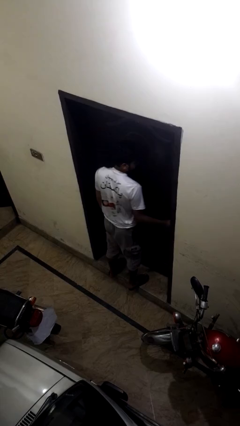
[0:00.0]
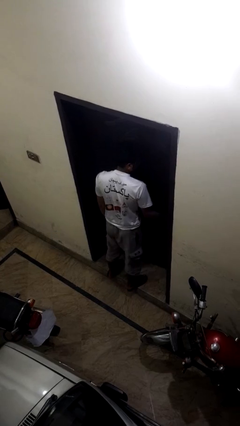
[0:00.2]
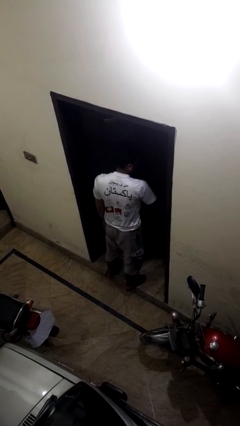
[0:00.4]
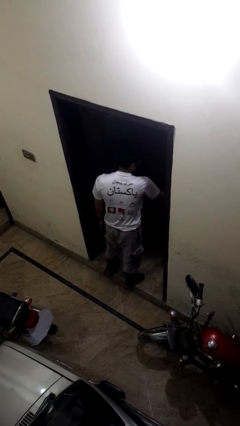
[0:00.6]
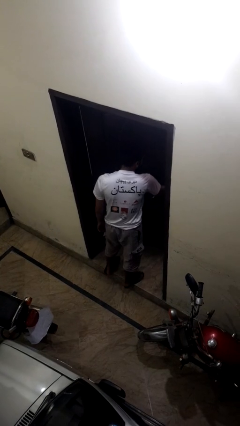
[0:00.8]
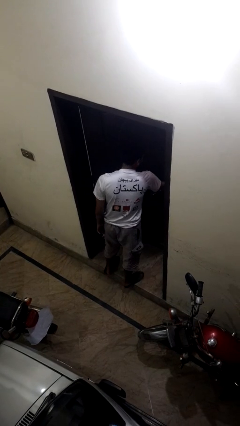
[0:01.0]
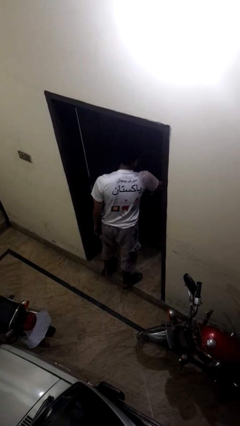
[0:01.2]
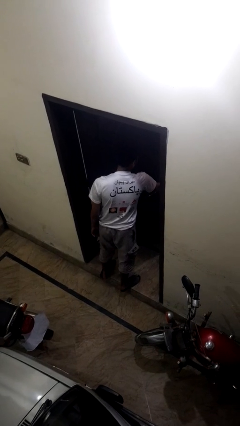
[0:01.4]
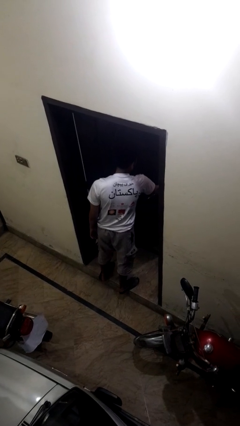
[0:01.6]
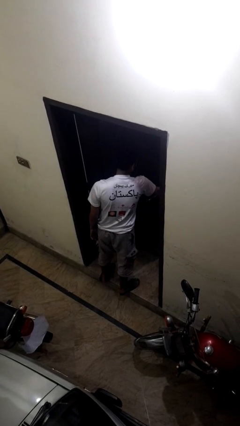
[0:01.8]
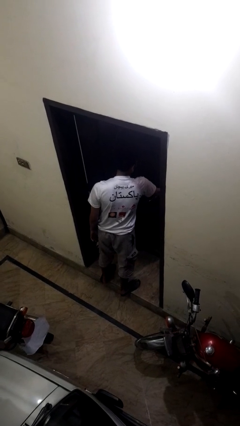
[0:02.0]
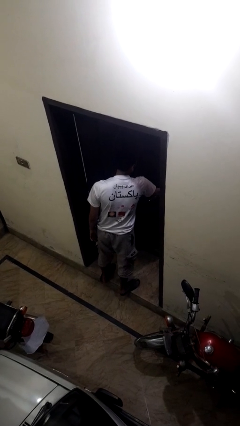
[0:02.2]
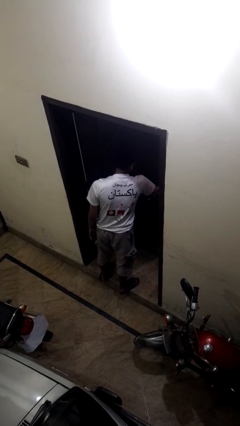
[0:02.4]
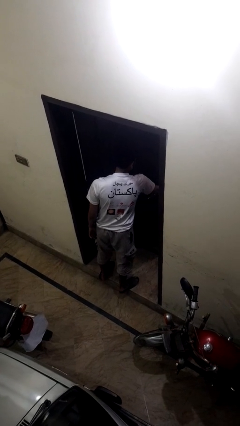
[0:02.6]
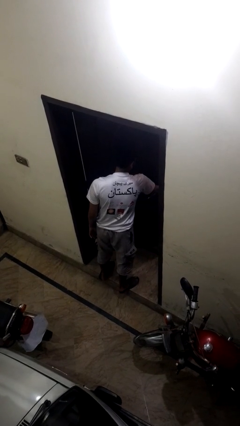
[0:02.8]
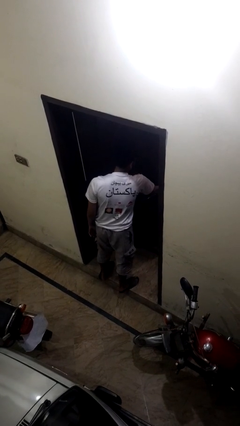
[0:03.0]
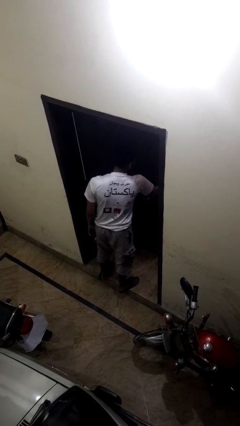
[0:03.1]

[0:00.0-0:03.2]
person opens facility door

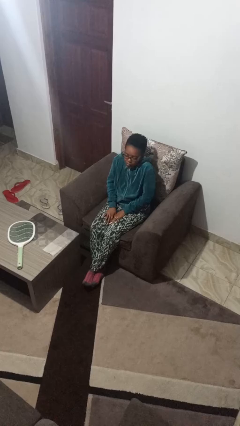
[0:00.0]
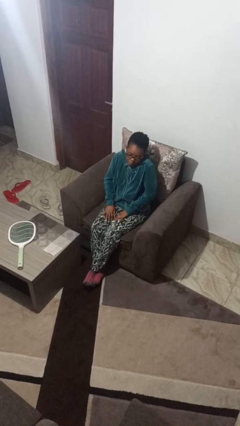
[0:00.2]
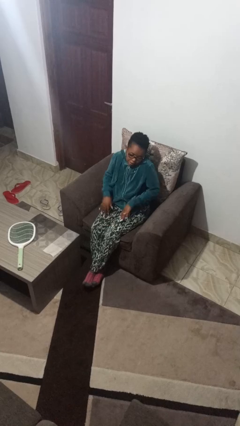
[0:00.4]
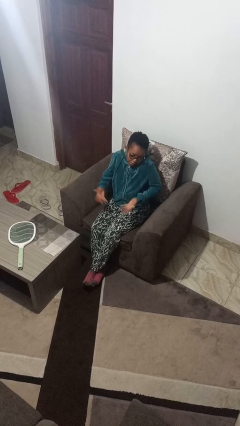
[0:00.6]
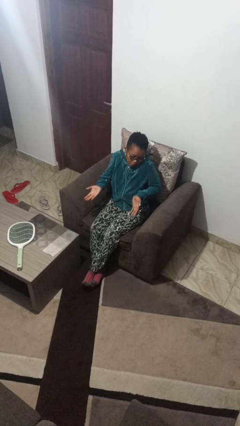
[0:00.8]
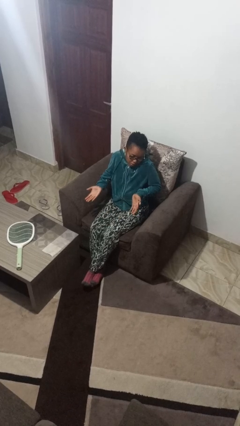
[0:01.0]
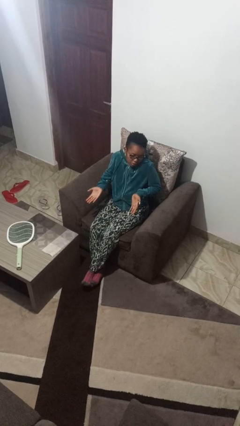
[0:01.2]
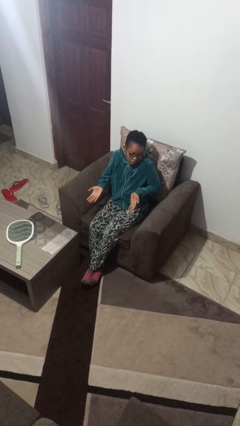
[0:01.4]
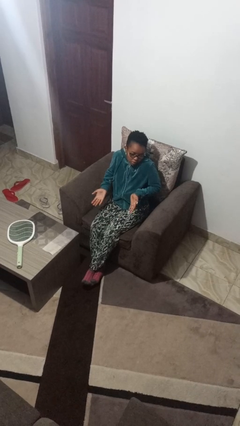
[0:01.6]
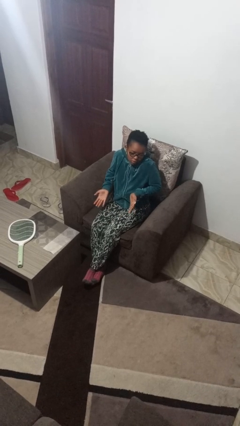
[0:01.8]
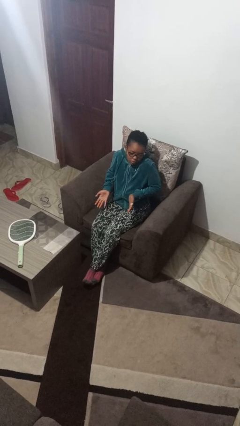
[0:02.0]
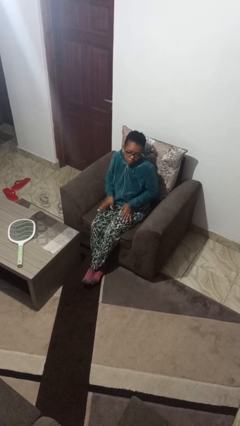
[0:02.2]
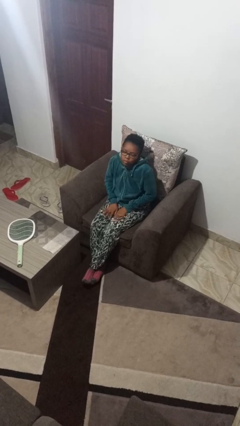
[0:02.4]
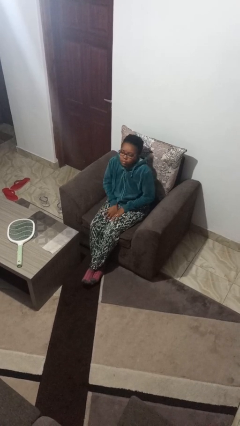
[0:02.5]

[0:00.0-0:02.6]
person shrugs

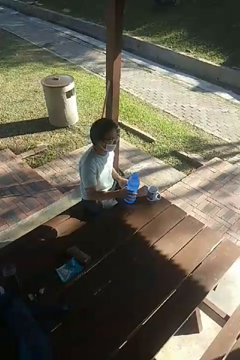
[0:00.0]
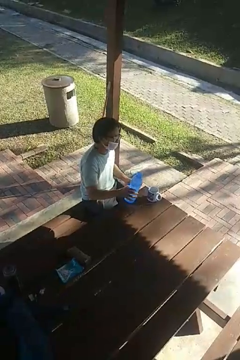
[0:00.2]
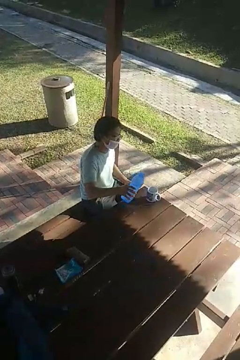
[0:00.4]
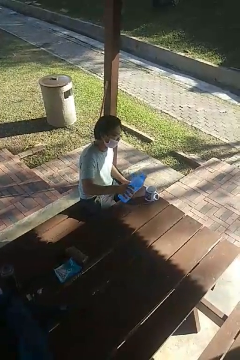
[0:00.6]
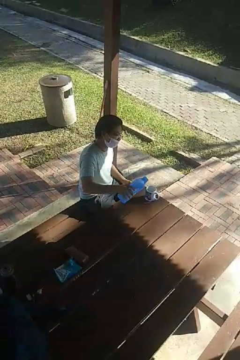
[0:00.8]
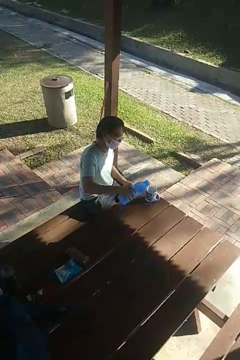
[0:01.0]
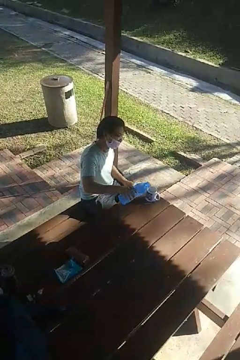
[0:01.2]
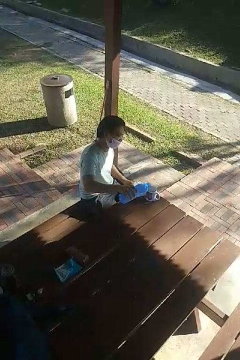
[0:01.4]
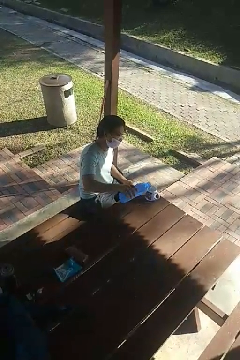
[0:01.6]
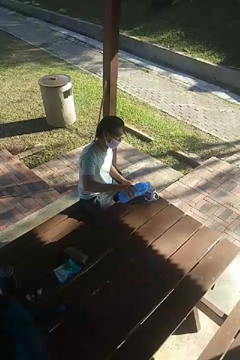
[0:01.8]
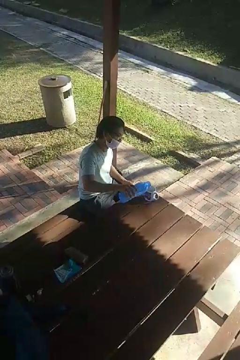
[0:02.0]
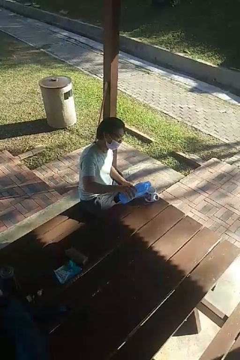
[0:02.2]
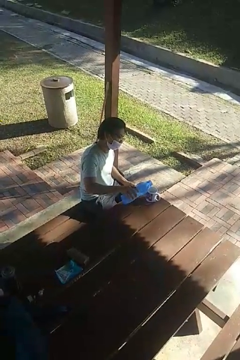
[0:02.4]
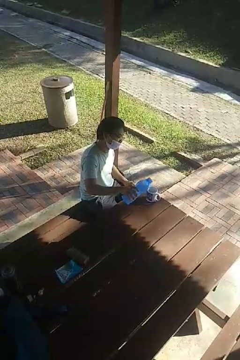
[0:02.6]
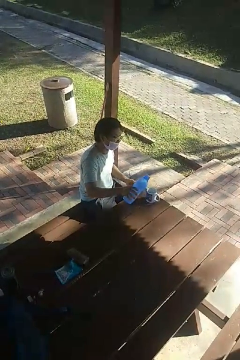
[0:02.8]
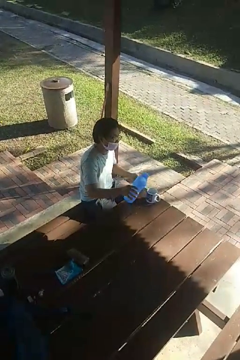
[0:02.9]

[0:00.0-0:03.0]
person pours liquid into cup

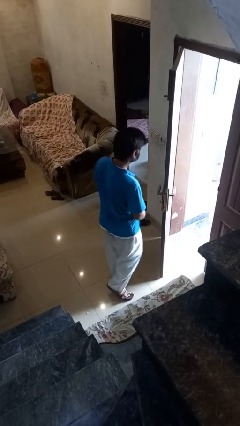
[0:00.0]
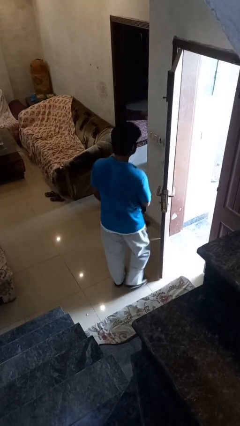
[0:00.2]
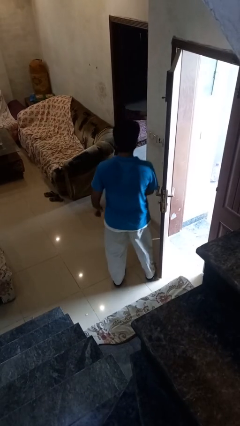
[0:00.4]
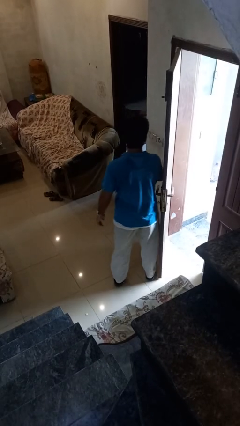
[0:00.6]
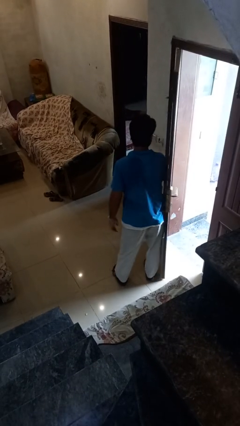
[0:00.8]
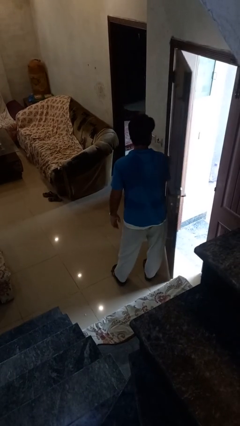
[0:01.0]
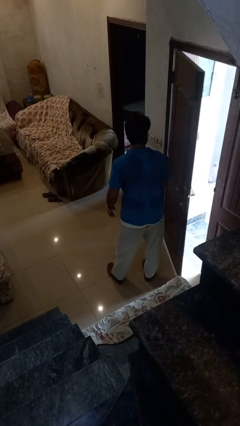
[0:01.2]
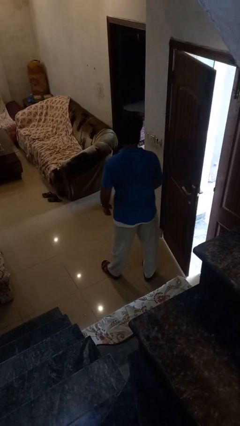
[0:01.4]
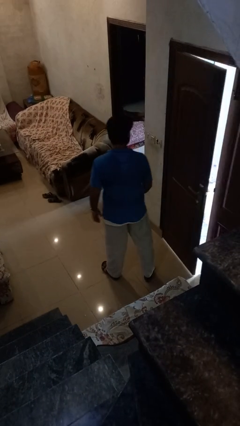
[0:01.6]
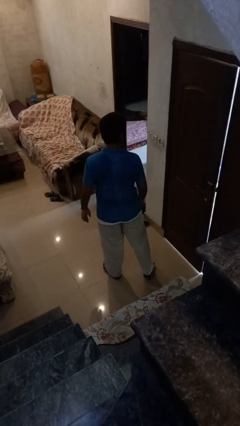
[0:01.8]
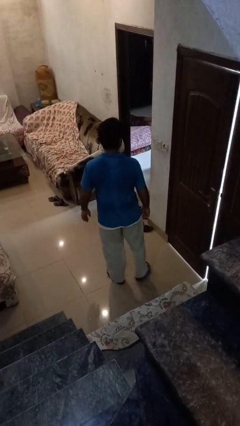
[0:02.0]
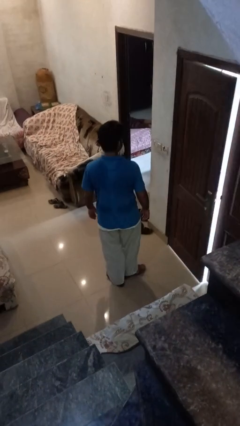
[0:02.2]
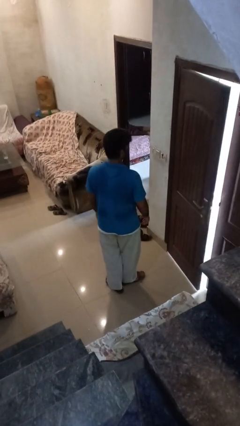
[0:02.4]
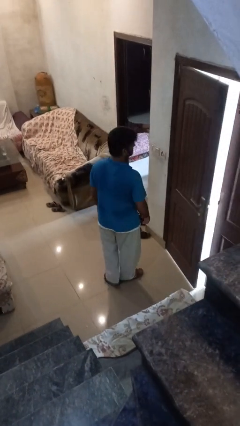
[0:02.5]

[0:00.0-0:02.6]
person closes door with hip

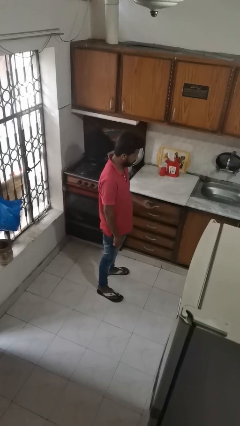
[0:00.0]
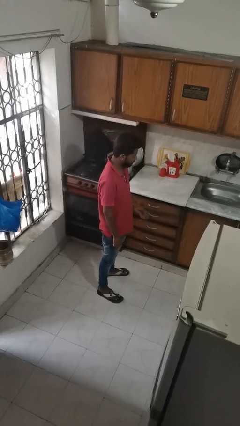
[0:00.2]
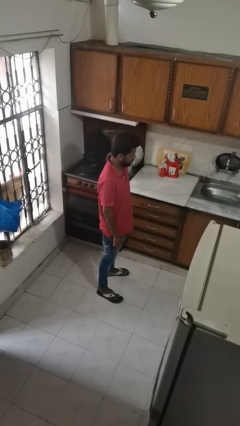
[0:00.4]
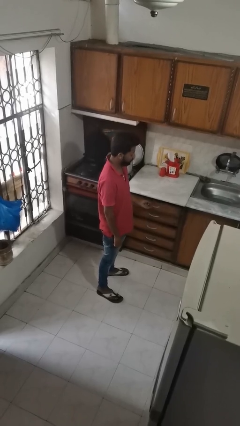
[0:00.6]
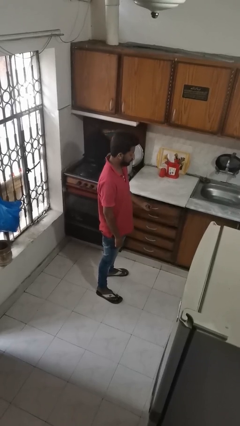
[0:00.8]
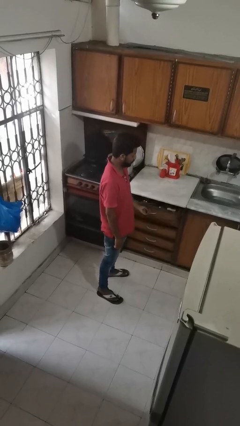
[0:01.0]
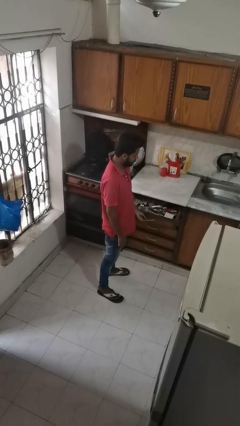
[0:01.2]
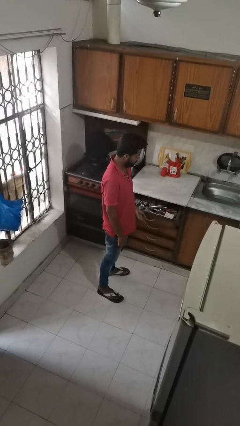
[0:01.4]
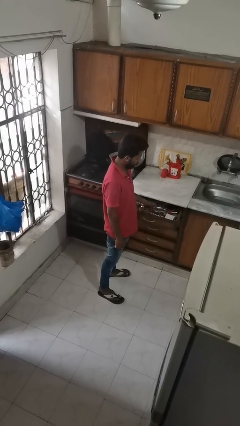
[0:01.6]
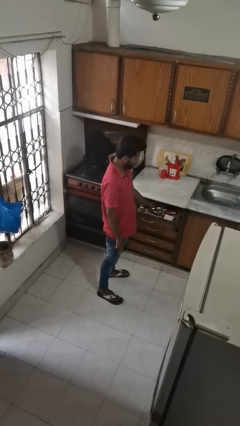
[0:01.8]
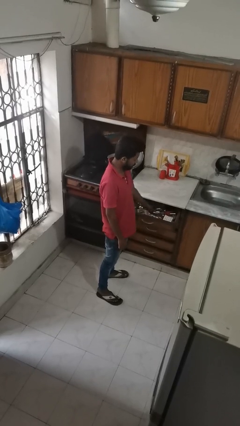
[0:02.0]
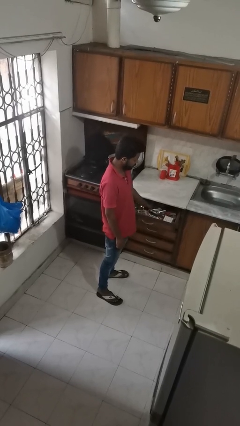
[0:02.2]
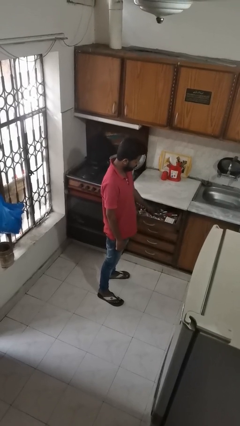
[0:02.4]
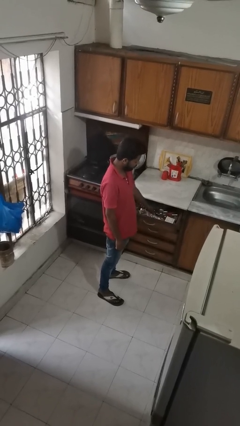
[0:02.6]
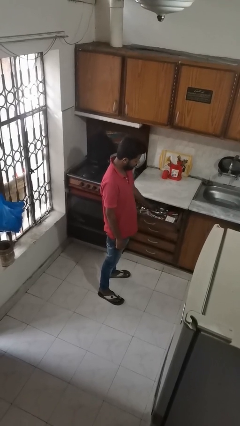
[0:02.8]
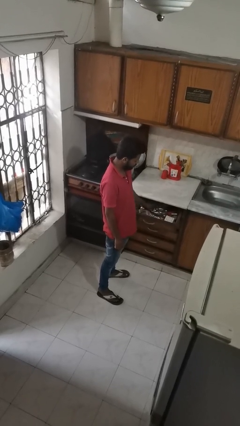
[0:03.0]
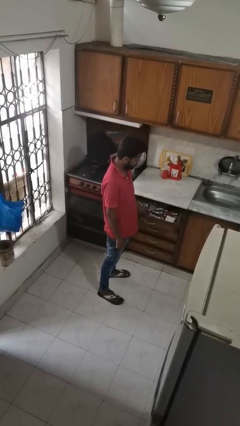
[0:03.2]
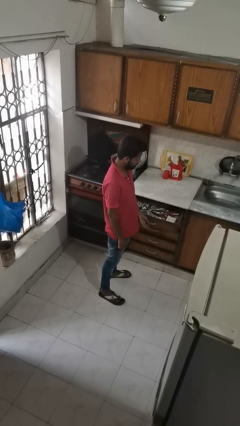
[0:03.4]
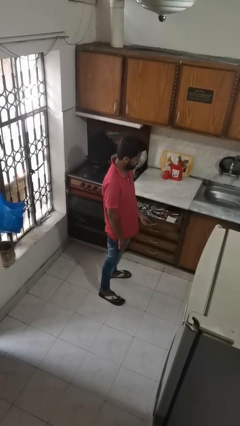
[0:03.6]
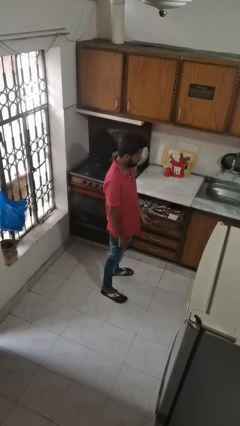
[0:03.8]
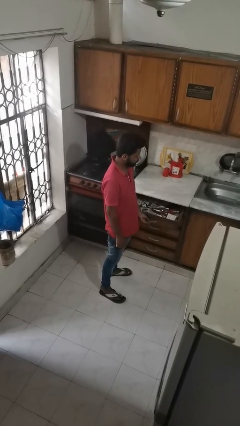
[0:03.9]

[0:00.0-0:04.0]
person searches in kitchen drawer

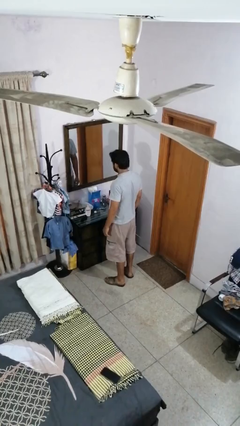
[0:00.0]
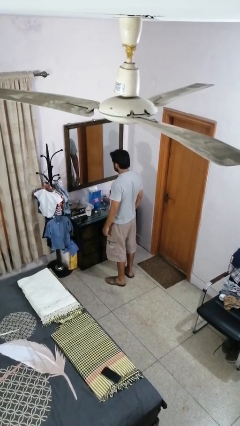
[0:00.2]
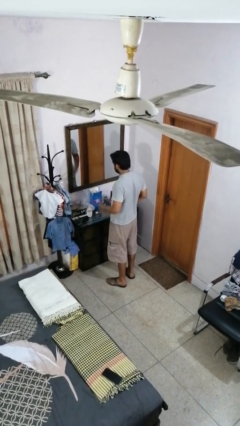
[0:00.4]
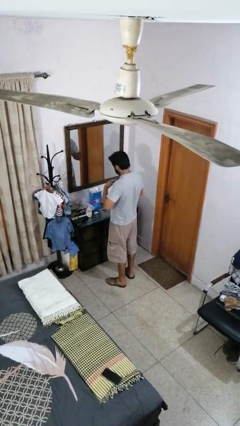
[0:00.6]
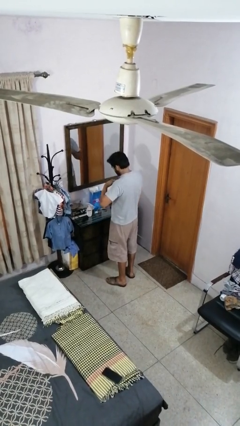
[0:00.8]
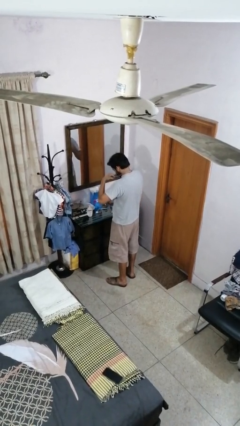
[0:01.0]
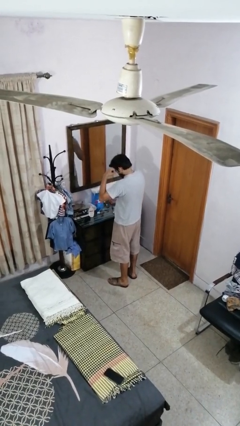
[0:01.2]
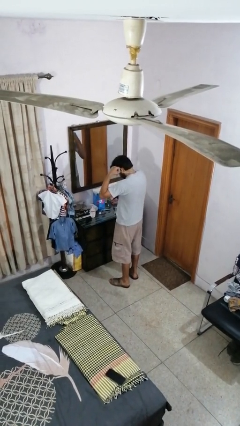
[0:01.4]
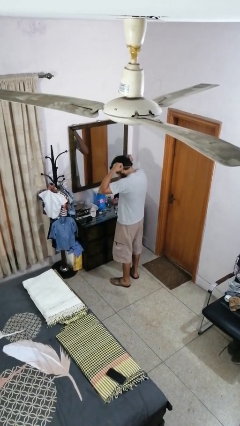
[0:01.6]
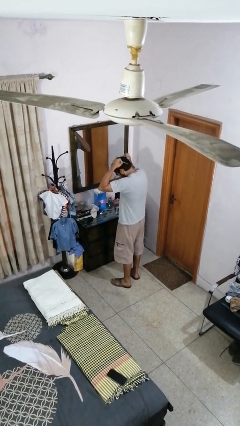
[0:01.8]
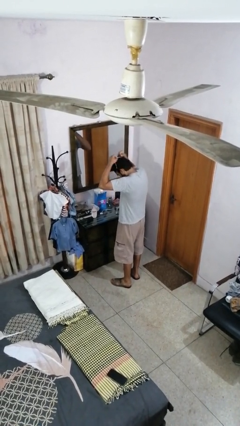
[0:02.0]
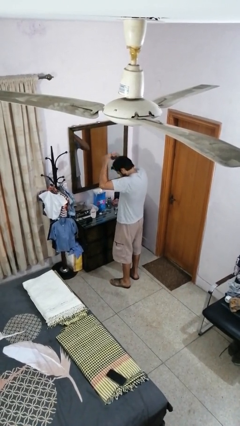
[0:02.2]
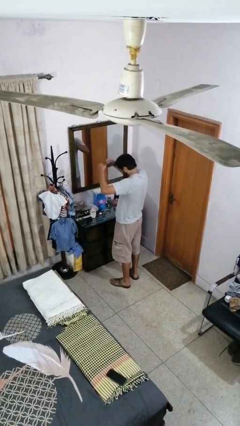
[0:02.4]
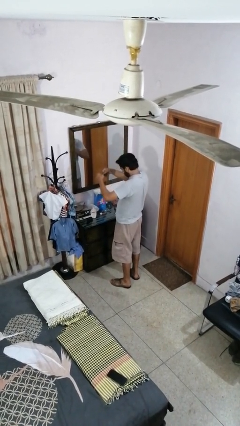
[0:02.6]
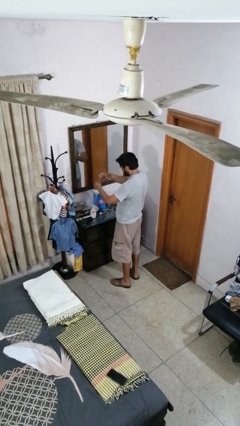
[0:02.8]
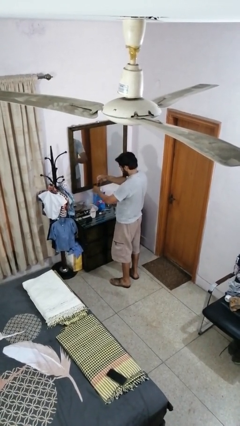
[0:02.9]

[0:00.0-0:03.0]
person takes off necklace
